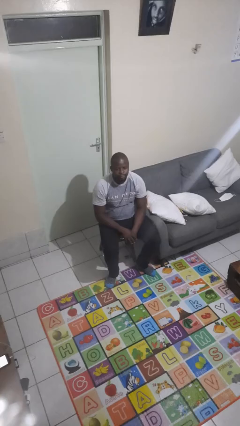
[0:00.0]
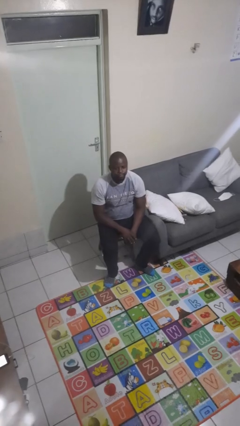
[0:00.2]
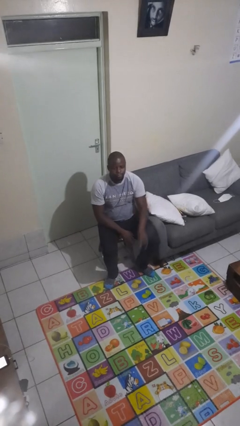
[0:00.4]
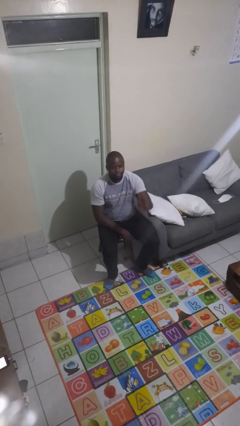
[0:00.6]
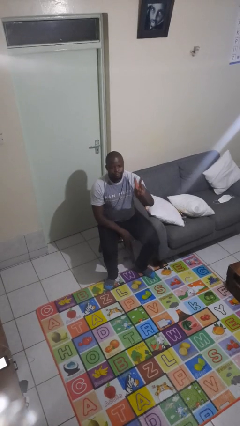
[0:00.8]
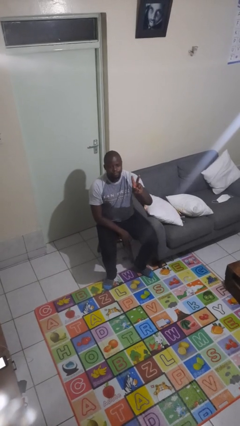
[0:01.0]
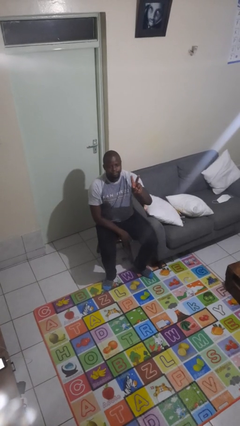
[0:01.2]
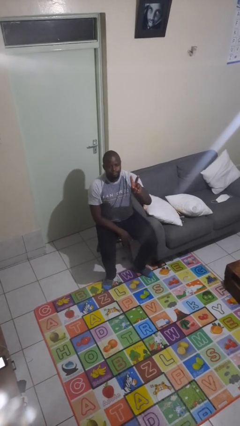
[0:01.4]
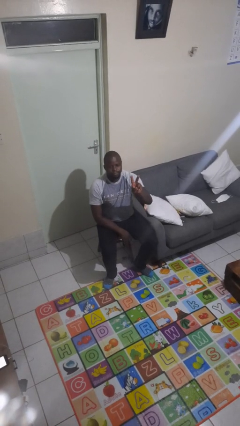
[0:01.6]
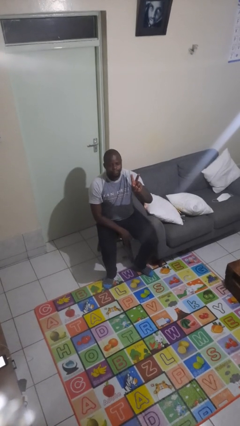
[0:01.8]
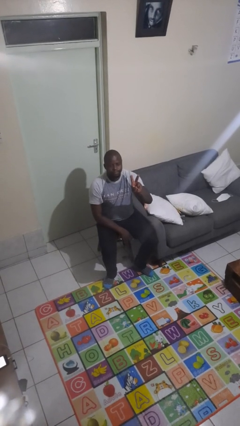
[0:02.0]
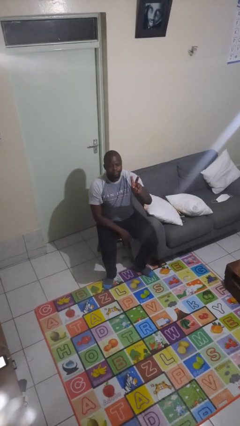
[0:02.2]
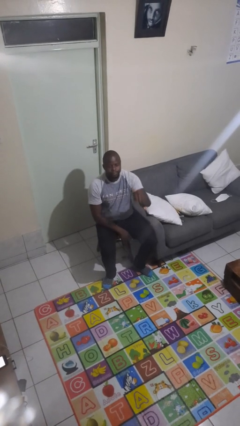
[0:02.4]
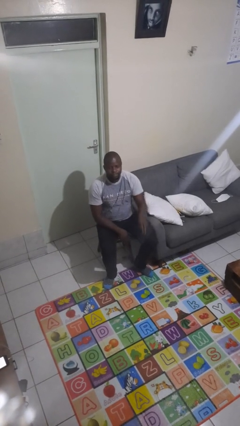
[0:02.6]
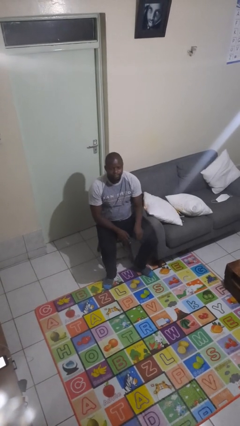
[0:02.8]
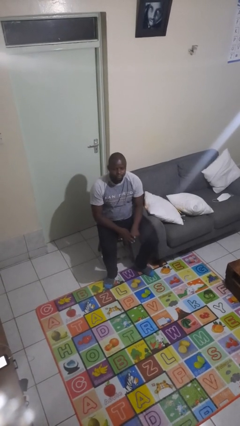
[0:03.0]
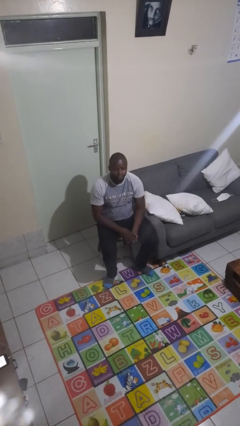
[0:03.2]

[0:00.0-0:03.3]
person gestures peace

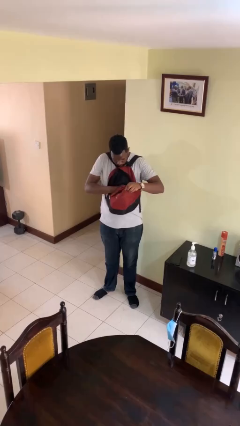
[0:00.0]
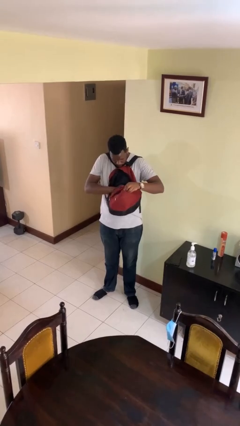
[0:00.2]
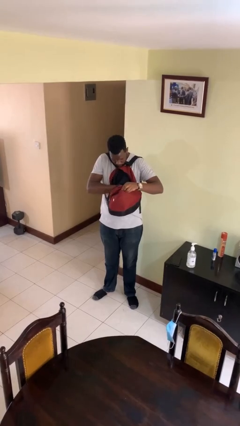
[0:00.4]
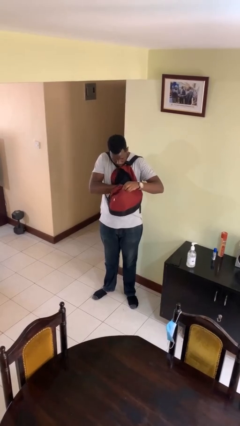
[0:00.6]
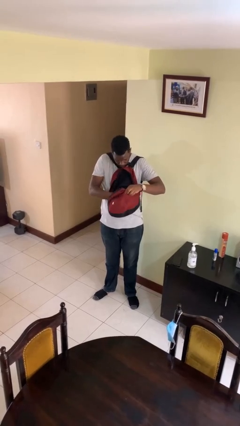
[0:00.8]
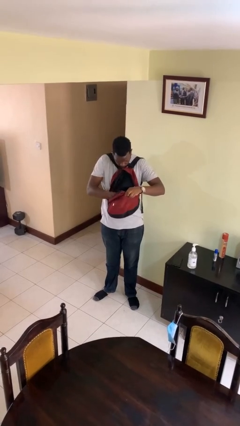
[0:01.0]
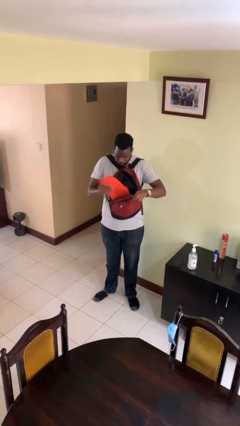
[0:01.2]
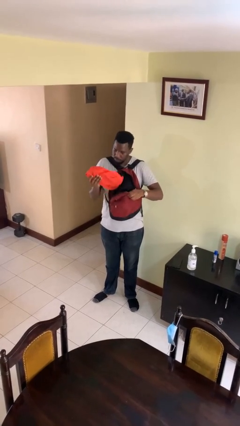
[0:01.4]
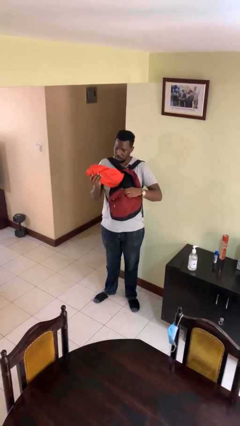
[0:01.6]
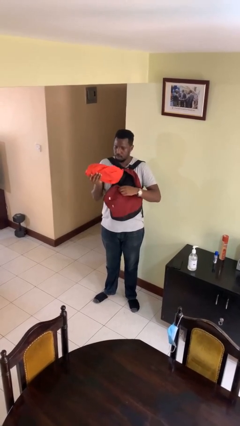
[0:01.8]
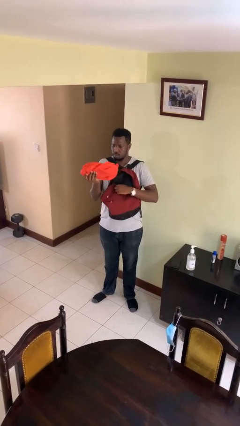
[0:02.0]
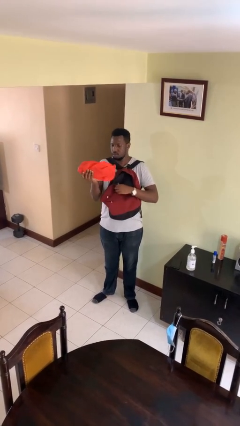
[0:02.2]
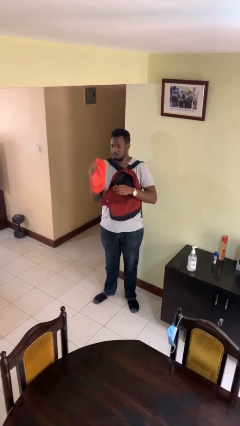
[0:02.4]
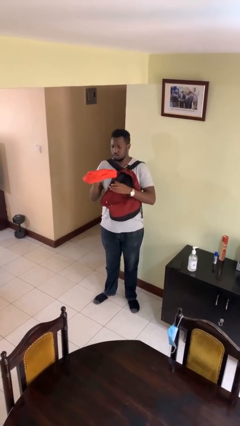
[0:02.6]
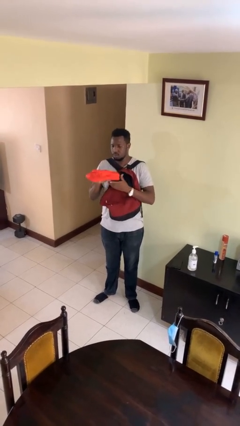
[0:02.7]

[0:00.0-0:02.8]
person takes object from backpack

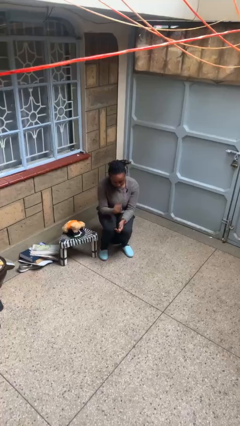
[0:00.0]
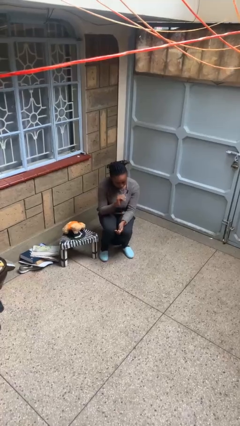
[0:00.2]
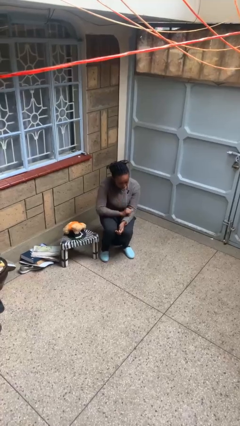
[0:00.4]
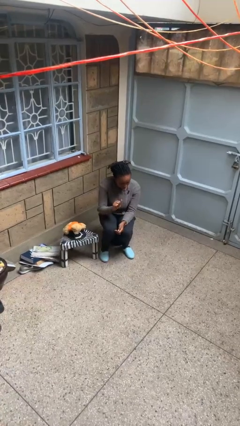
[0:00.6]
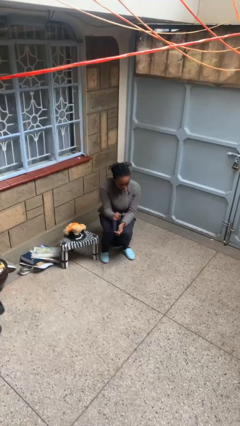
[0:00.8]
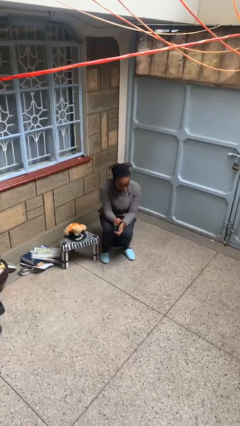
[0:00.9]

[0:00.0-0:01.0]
person swats bug

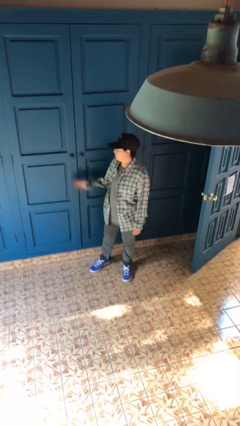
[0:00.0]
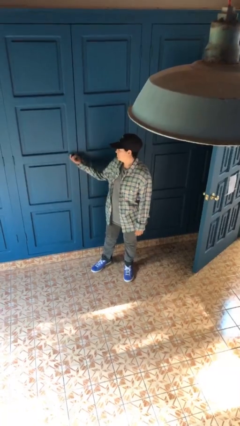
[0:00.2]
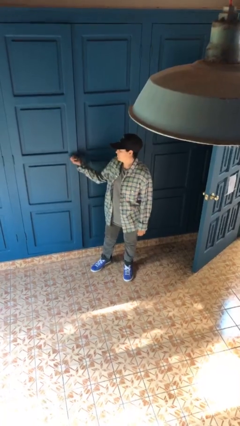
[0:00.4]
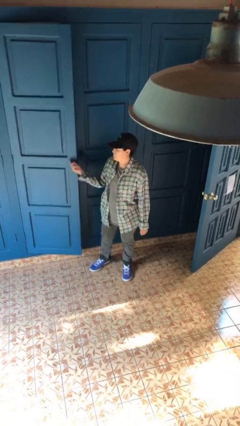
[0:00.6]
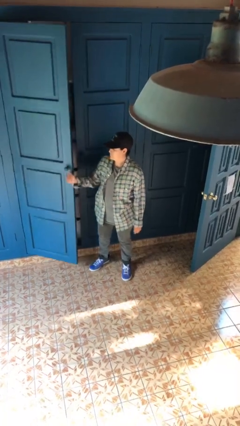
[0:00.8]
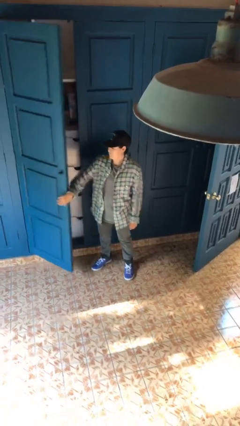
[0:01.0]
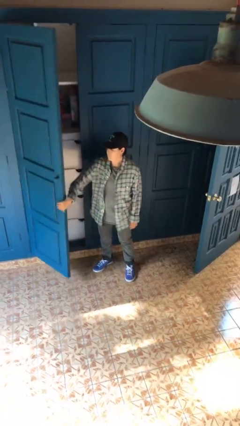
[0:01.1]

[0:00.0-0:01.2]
person opens closet door

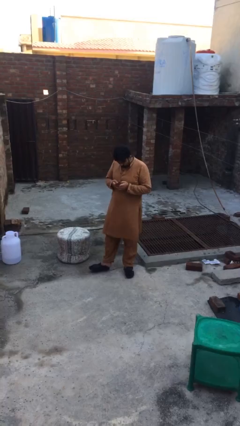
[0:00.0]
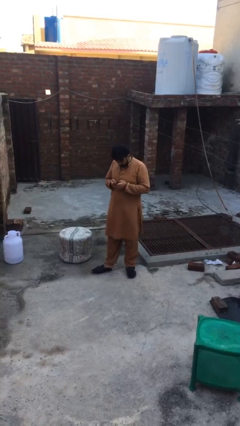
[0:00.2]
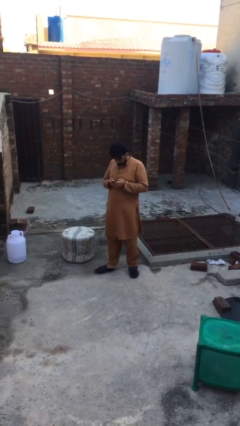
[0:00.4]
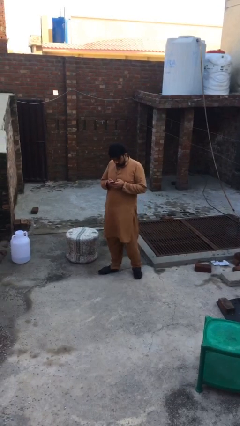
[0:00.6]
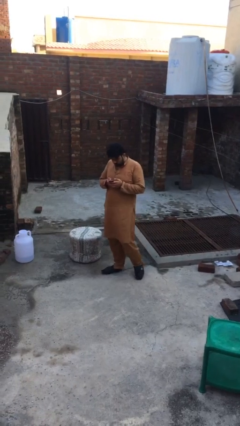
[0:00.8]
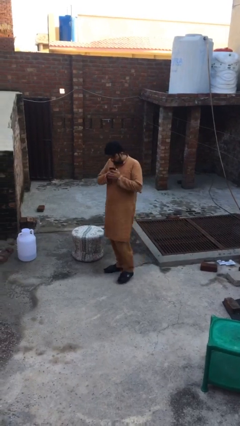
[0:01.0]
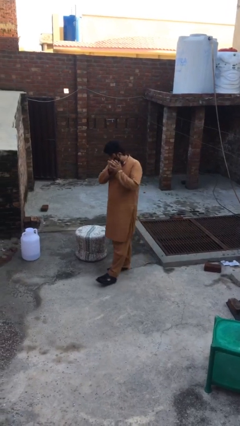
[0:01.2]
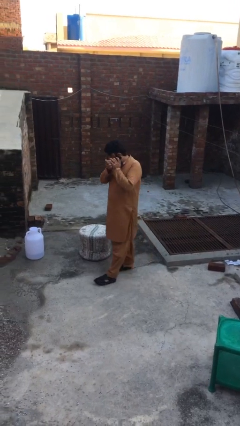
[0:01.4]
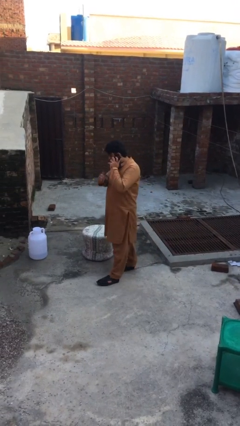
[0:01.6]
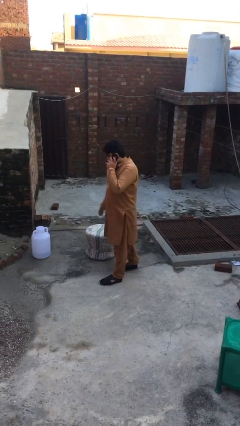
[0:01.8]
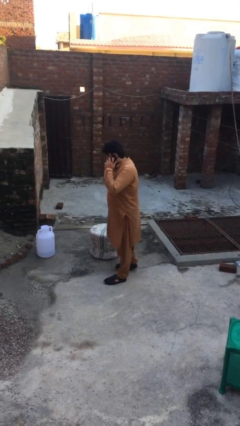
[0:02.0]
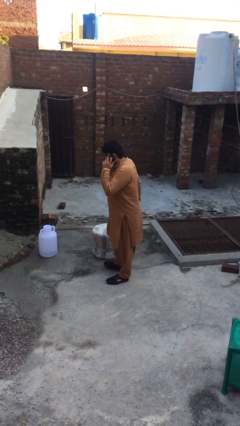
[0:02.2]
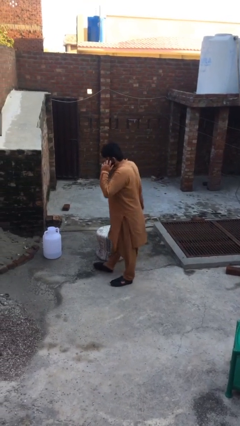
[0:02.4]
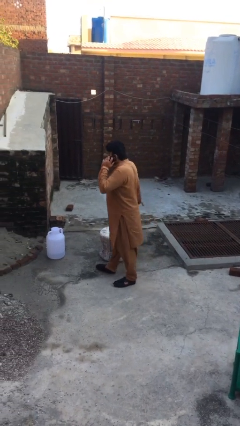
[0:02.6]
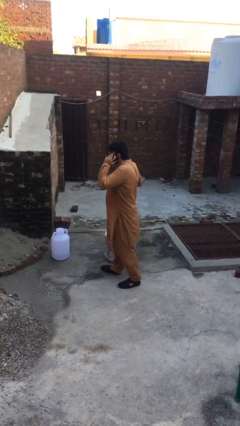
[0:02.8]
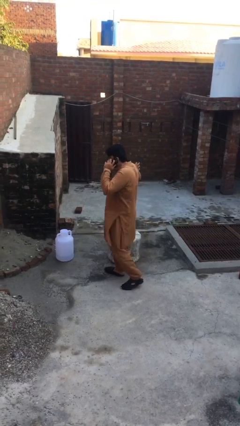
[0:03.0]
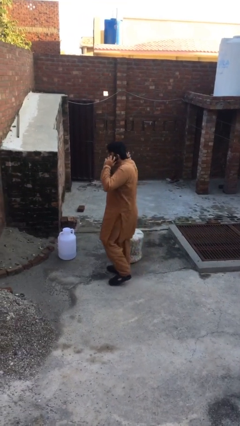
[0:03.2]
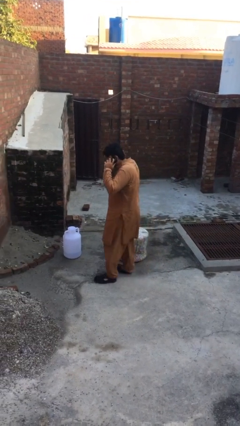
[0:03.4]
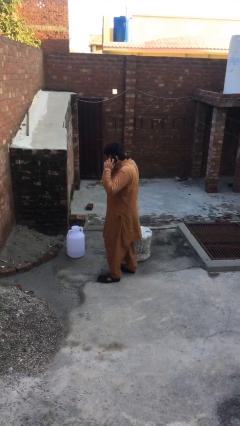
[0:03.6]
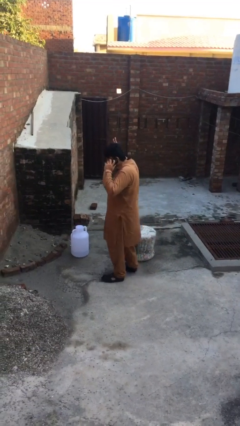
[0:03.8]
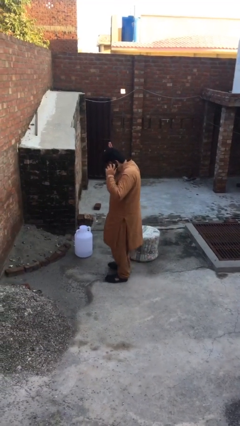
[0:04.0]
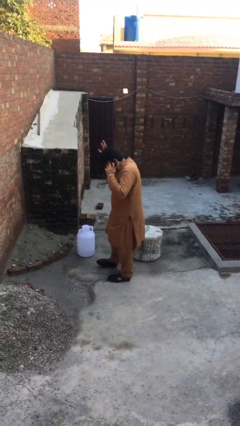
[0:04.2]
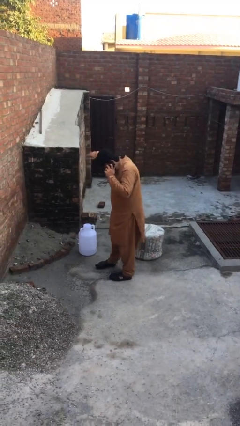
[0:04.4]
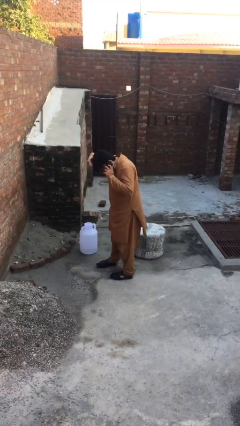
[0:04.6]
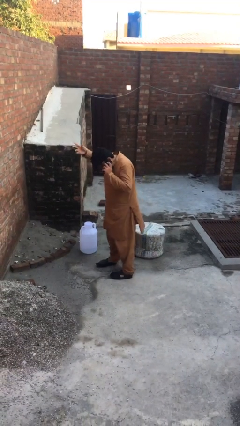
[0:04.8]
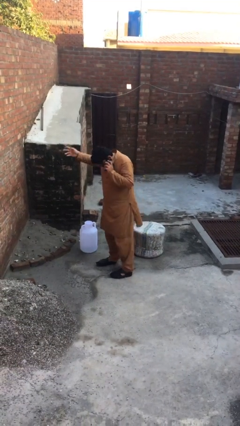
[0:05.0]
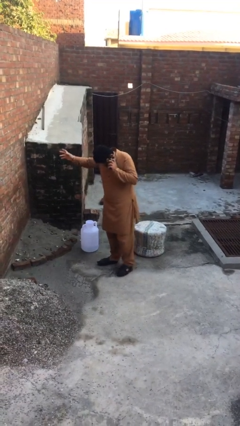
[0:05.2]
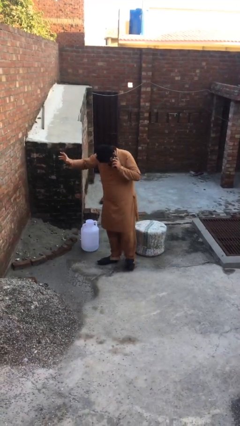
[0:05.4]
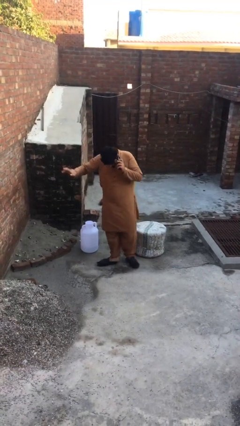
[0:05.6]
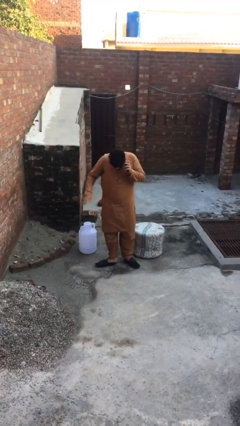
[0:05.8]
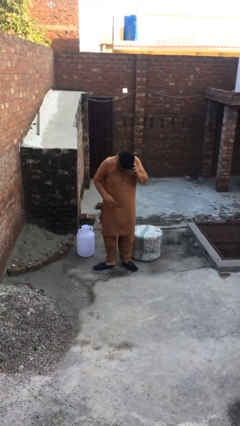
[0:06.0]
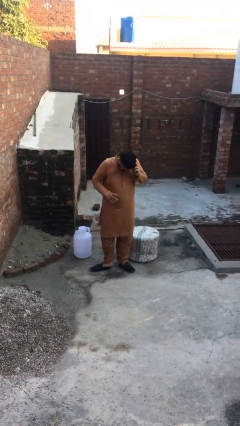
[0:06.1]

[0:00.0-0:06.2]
person talks on phone

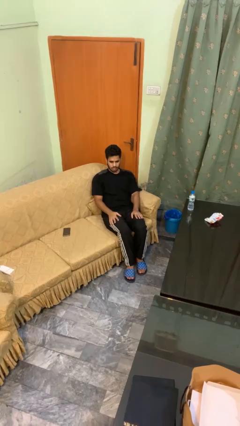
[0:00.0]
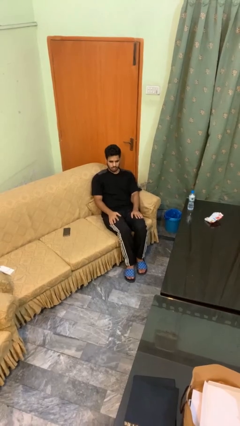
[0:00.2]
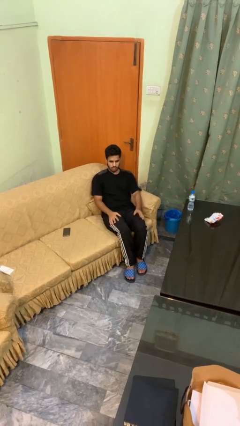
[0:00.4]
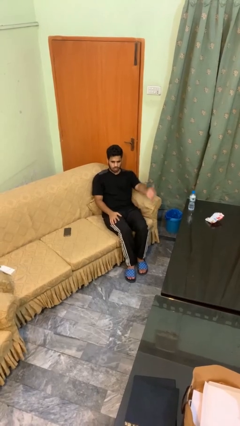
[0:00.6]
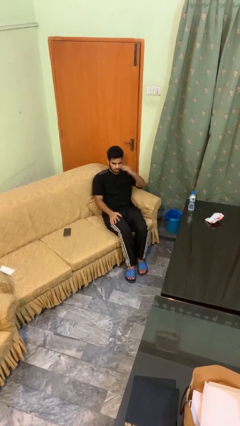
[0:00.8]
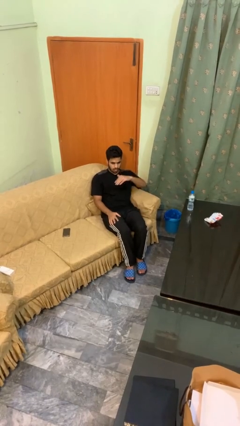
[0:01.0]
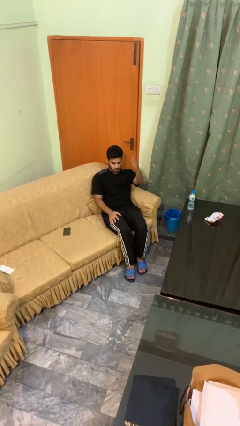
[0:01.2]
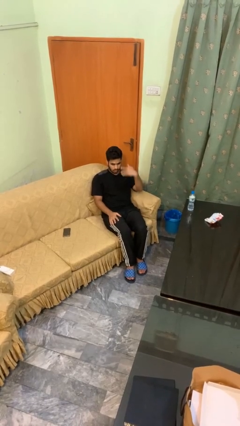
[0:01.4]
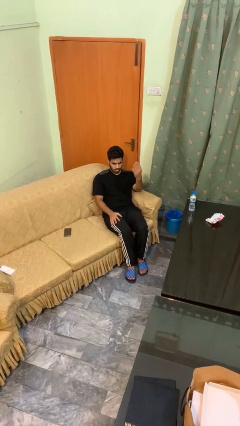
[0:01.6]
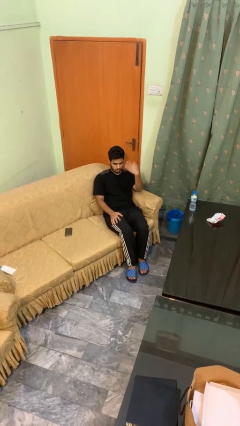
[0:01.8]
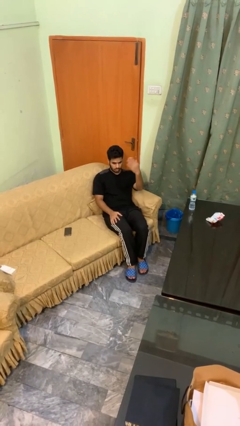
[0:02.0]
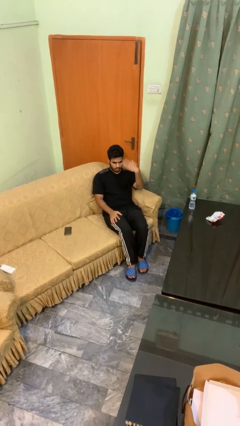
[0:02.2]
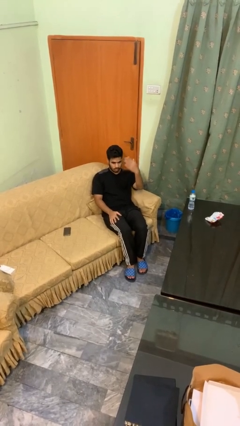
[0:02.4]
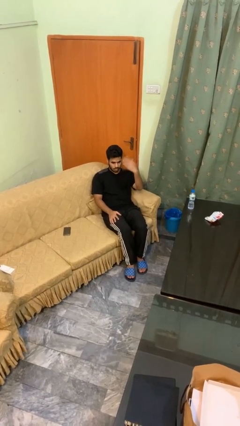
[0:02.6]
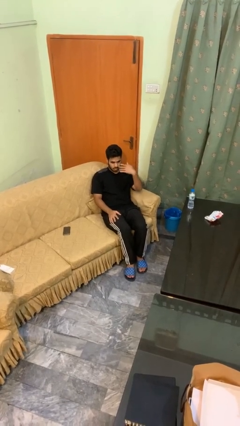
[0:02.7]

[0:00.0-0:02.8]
person gestures come here

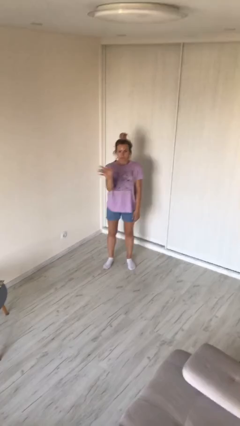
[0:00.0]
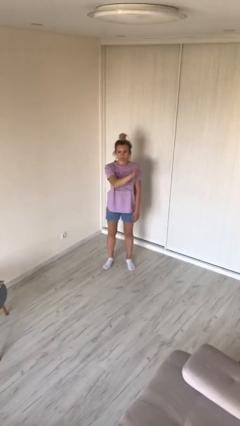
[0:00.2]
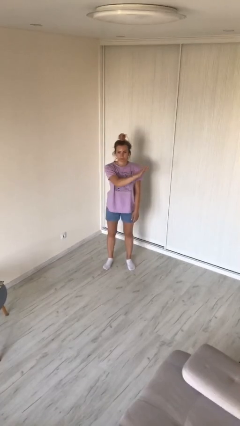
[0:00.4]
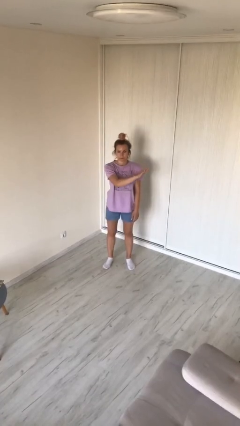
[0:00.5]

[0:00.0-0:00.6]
person gestures swipe left
